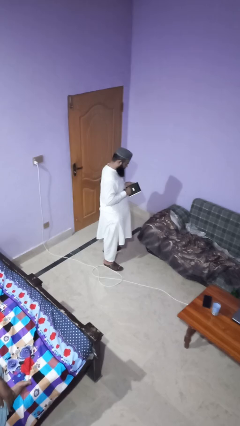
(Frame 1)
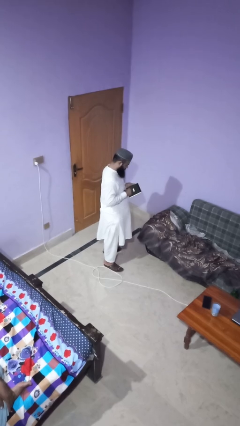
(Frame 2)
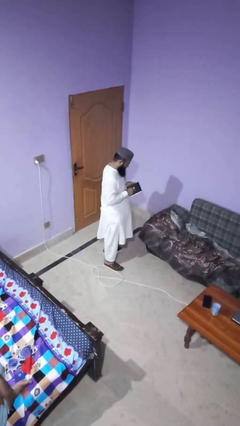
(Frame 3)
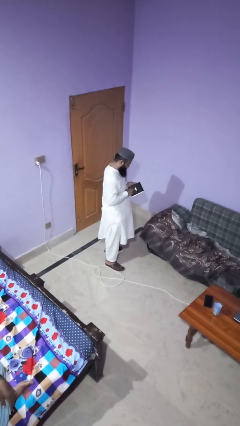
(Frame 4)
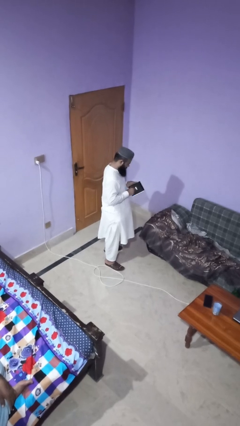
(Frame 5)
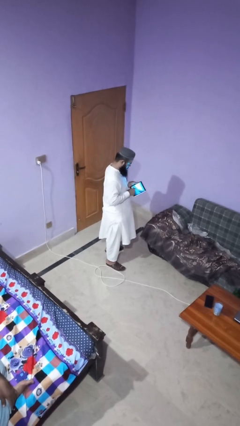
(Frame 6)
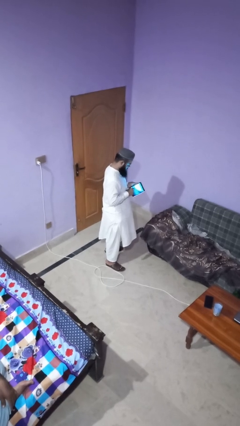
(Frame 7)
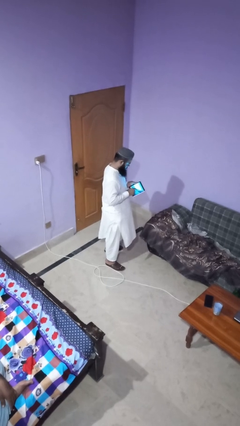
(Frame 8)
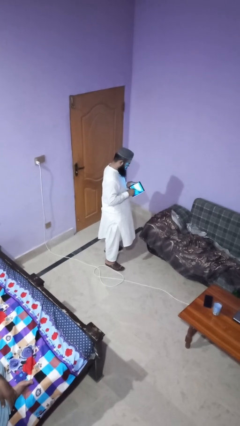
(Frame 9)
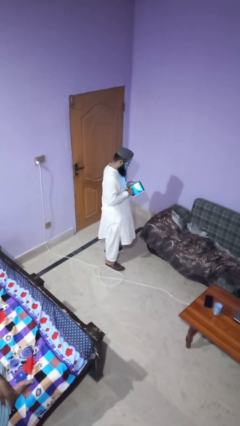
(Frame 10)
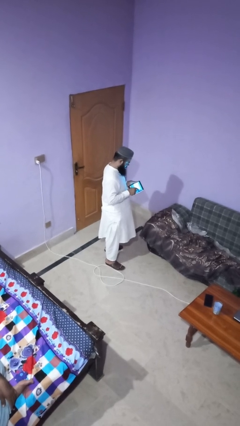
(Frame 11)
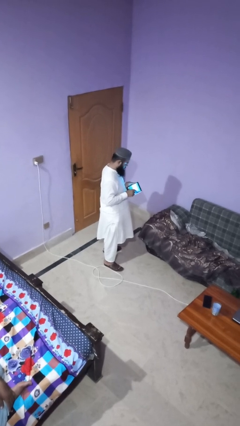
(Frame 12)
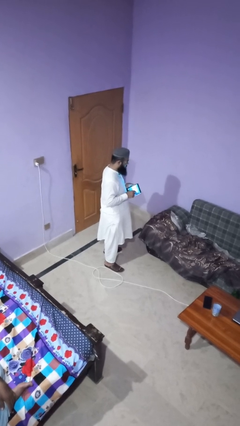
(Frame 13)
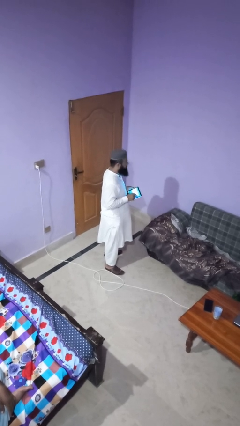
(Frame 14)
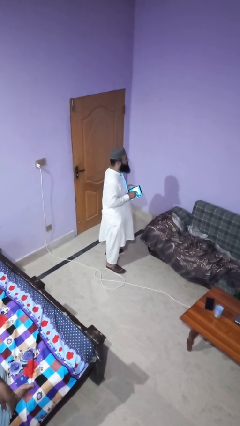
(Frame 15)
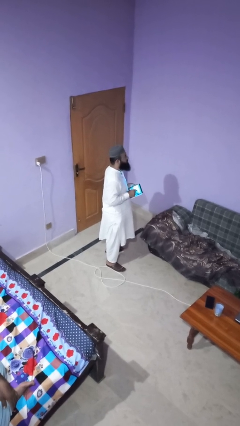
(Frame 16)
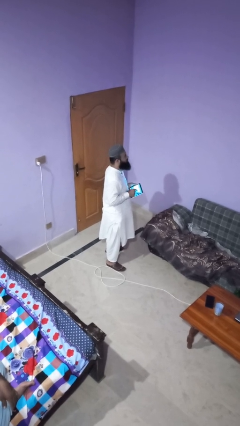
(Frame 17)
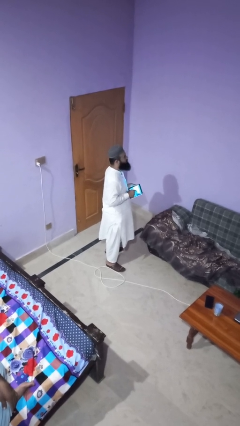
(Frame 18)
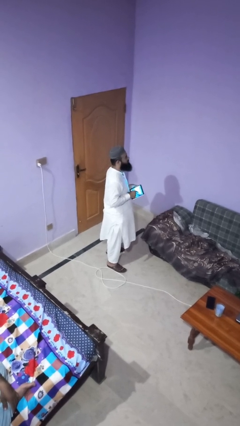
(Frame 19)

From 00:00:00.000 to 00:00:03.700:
person interacts with tablet

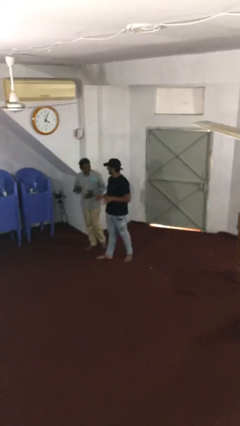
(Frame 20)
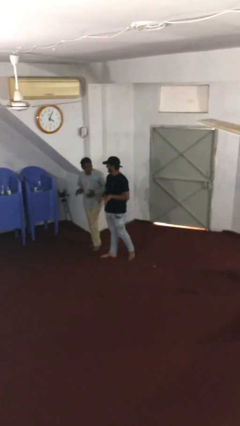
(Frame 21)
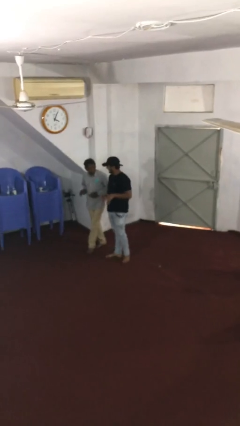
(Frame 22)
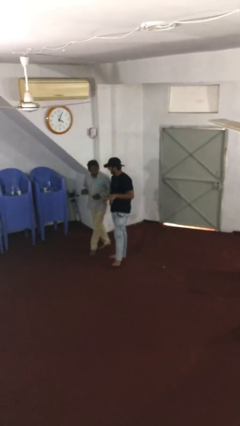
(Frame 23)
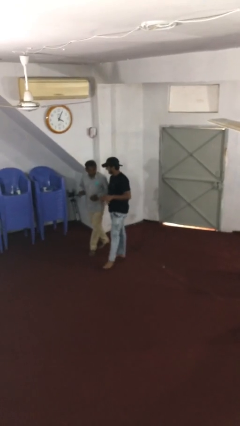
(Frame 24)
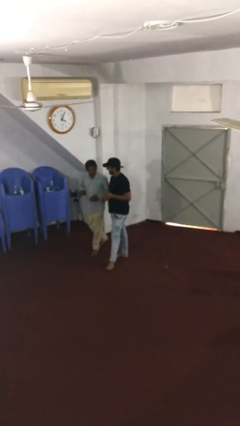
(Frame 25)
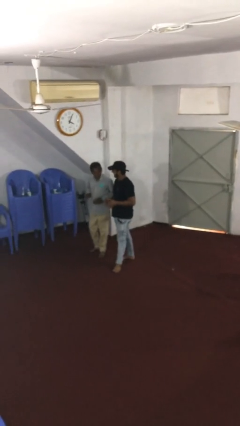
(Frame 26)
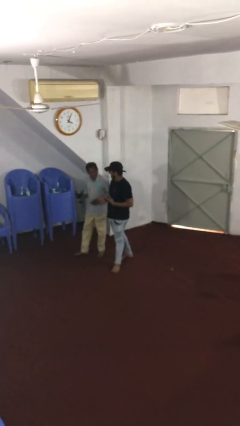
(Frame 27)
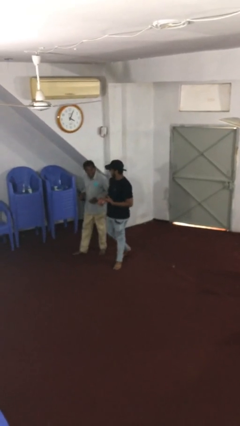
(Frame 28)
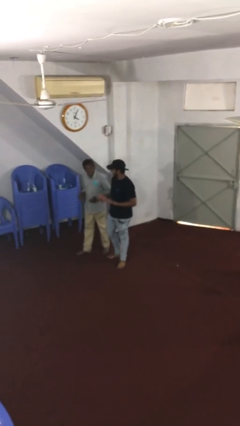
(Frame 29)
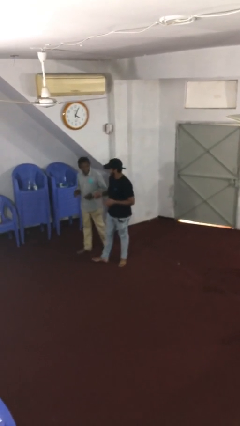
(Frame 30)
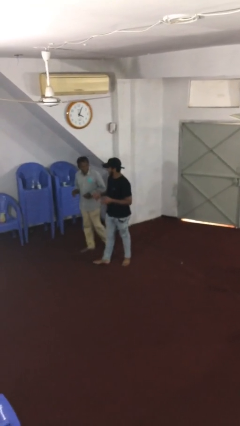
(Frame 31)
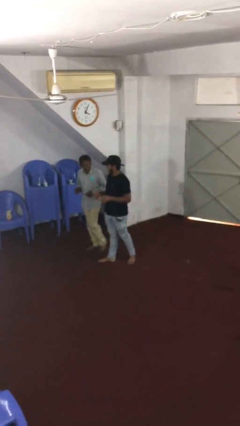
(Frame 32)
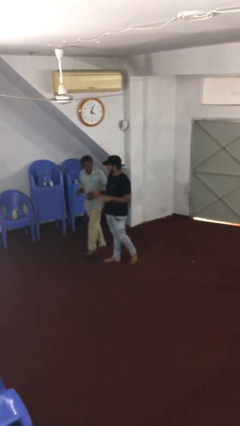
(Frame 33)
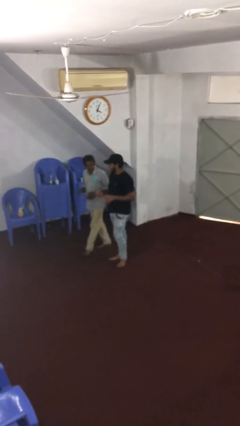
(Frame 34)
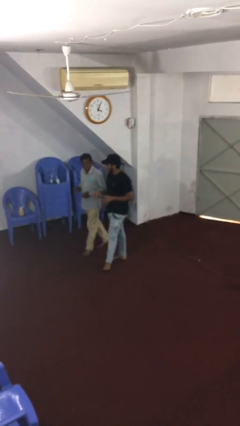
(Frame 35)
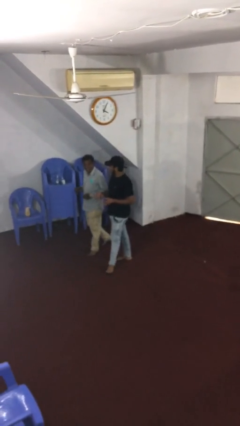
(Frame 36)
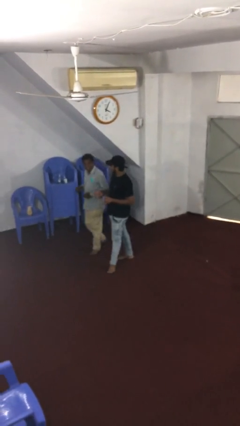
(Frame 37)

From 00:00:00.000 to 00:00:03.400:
person talks to person

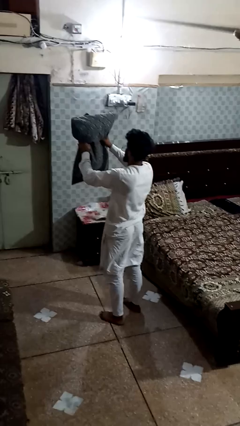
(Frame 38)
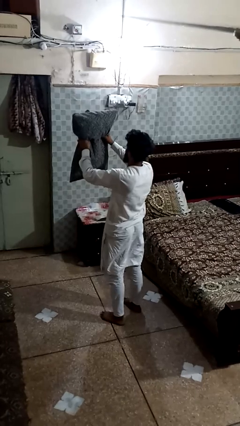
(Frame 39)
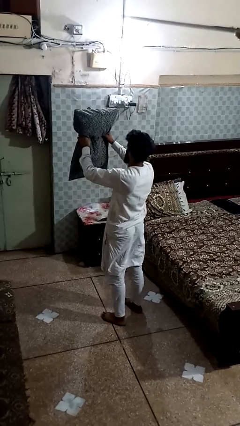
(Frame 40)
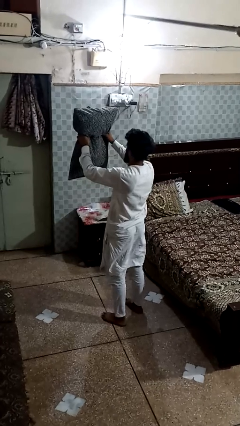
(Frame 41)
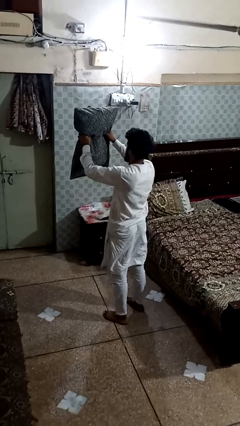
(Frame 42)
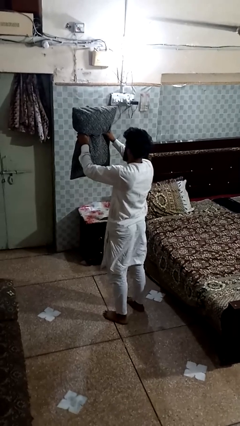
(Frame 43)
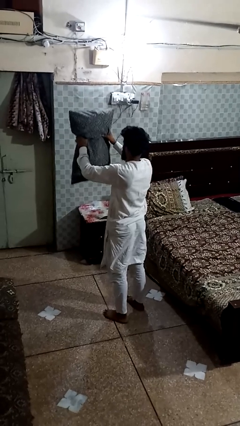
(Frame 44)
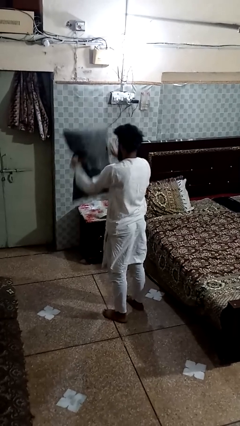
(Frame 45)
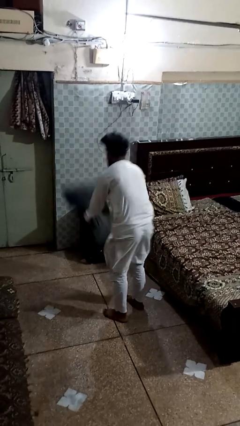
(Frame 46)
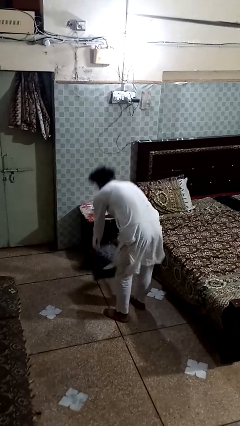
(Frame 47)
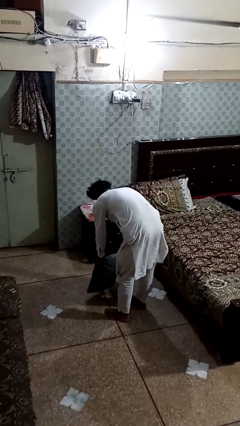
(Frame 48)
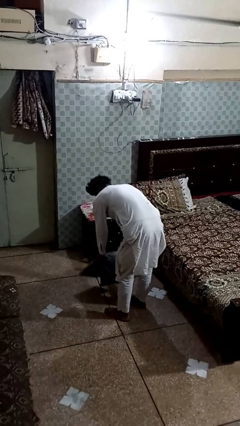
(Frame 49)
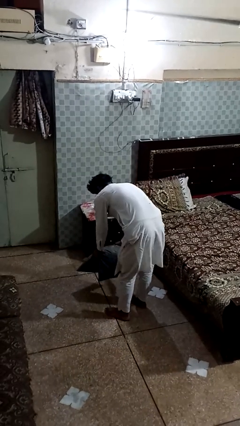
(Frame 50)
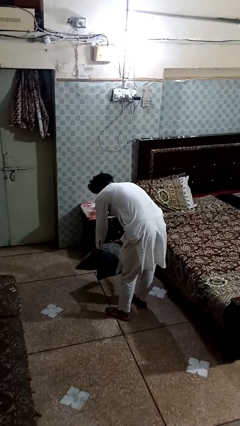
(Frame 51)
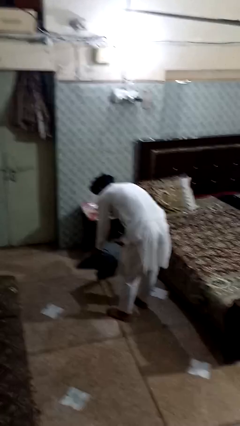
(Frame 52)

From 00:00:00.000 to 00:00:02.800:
person drops object

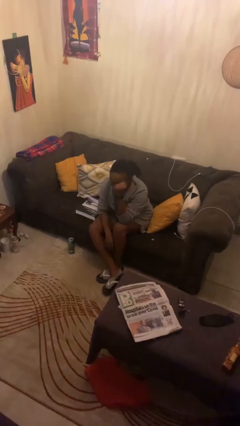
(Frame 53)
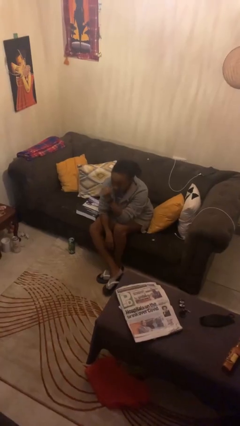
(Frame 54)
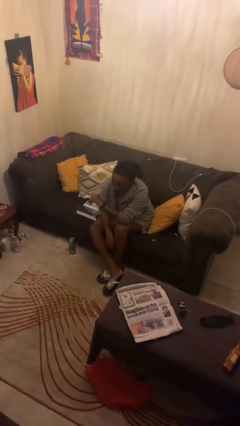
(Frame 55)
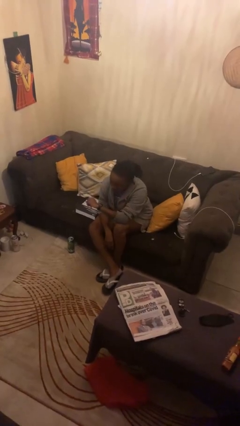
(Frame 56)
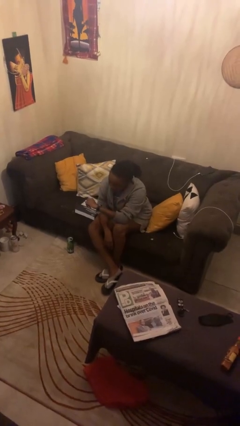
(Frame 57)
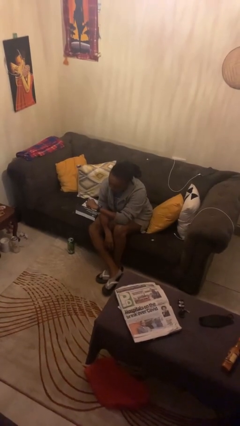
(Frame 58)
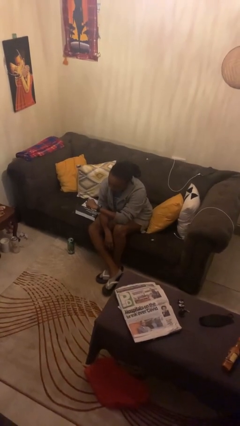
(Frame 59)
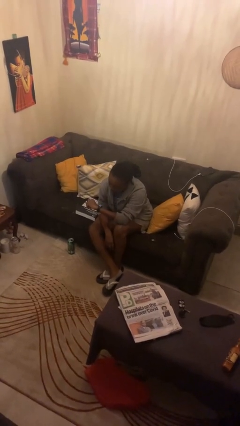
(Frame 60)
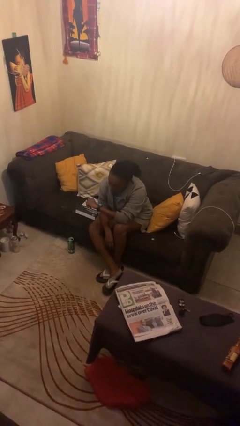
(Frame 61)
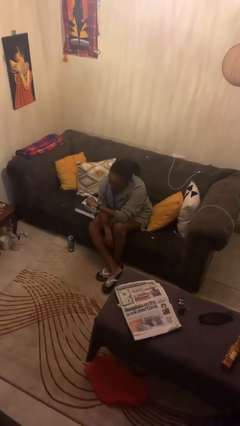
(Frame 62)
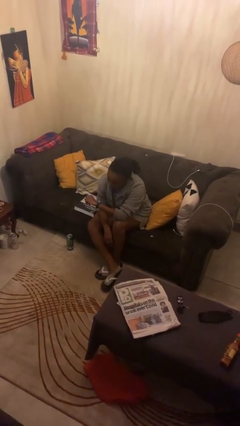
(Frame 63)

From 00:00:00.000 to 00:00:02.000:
person looks at wristwatch

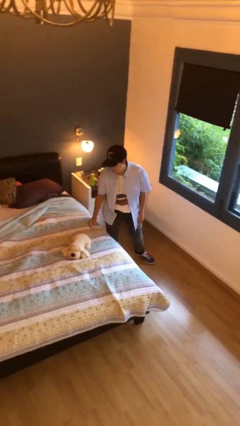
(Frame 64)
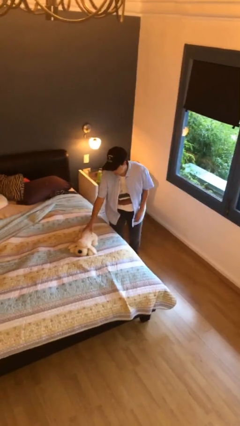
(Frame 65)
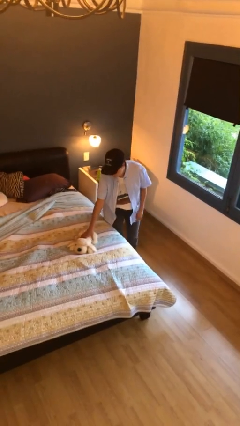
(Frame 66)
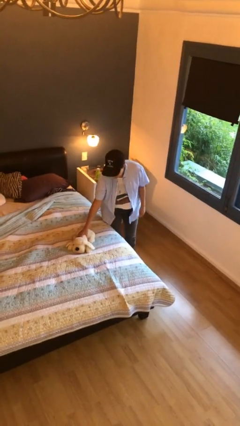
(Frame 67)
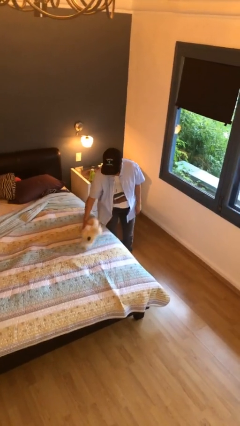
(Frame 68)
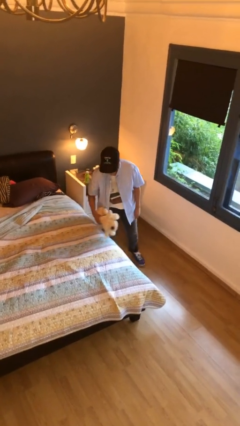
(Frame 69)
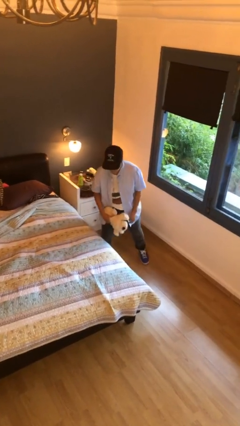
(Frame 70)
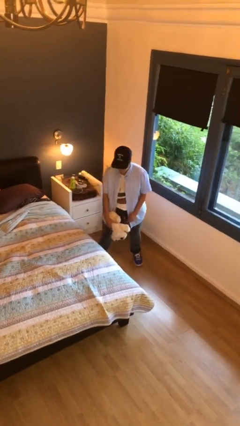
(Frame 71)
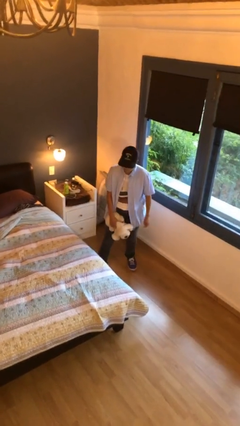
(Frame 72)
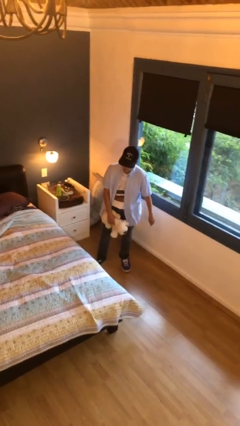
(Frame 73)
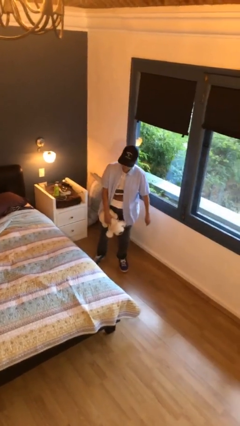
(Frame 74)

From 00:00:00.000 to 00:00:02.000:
person picks up object from bed

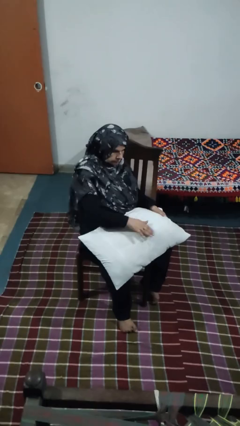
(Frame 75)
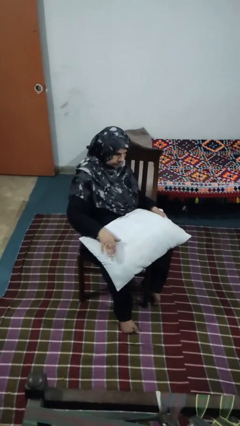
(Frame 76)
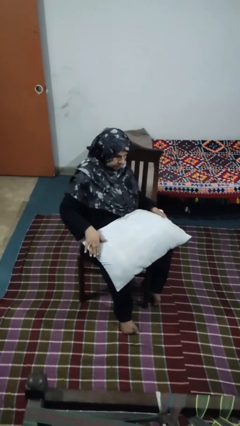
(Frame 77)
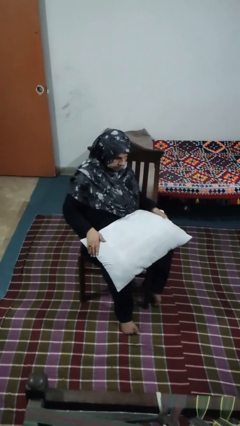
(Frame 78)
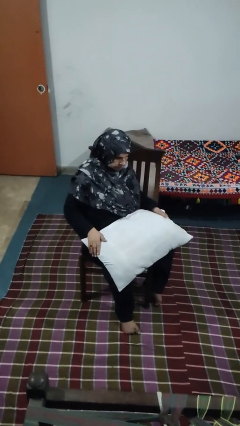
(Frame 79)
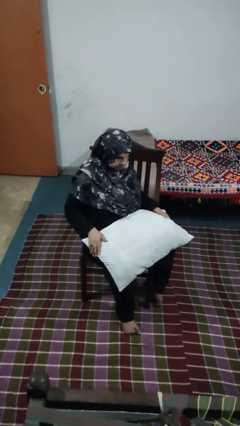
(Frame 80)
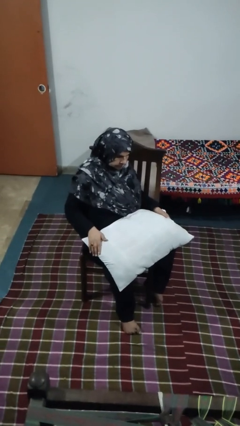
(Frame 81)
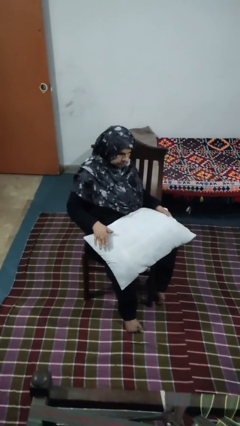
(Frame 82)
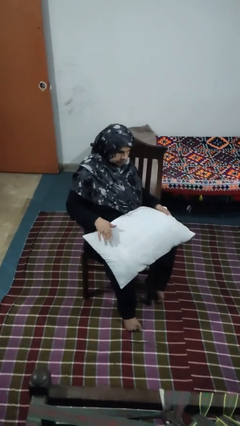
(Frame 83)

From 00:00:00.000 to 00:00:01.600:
person waves hand over object

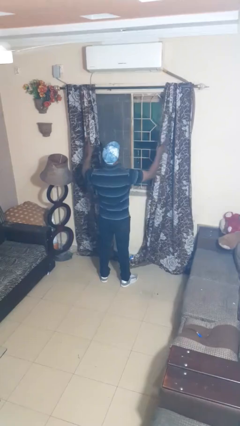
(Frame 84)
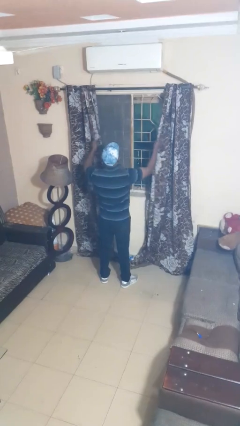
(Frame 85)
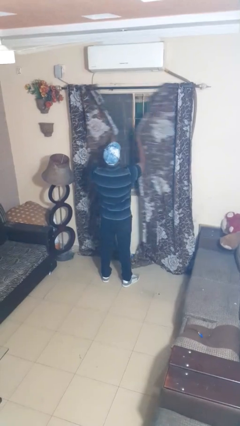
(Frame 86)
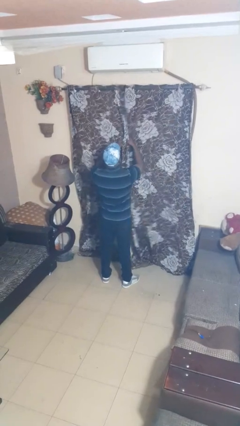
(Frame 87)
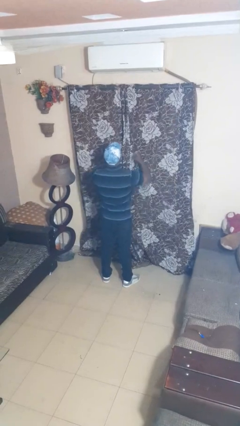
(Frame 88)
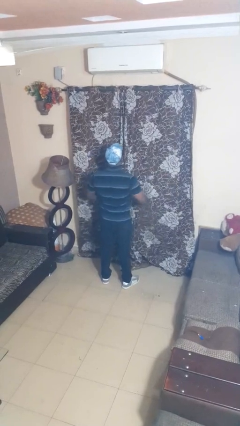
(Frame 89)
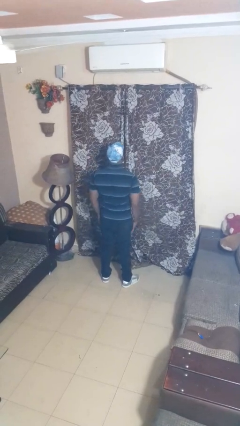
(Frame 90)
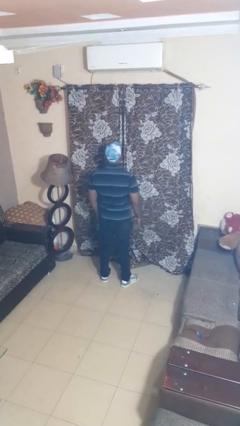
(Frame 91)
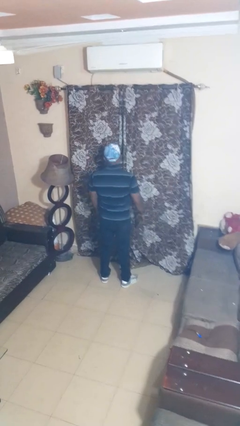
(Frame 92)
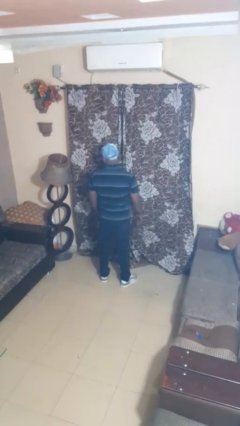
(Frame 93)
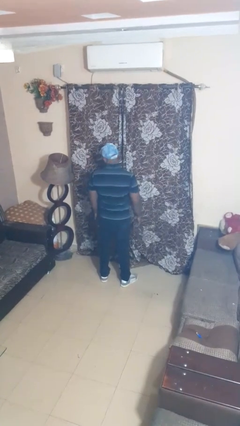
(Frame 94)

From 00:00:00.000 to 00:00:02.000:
person closes curtains
